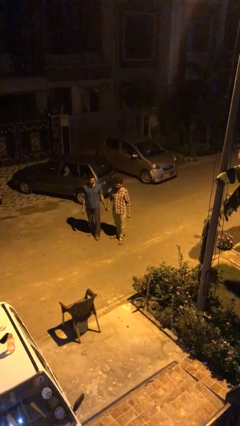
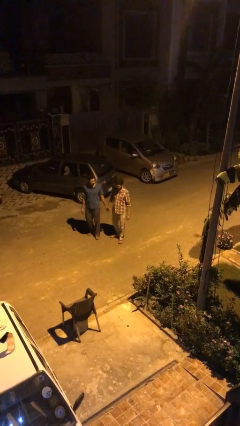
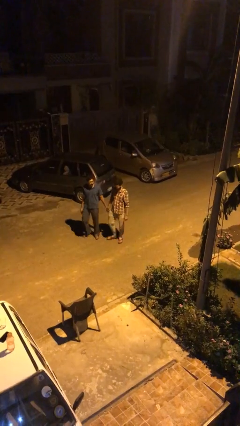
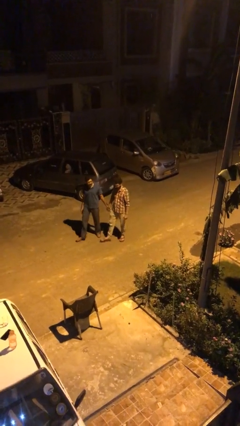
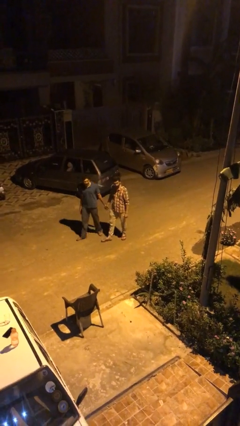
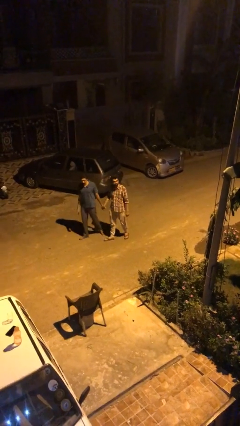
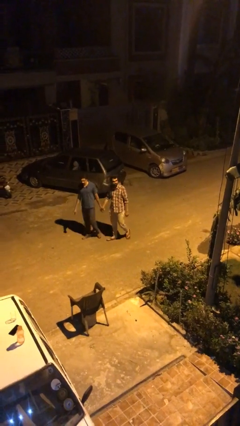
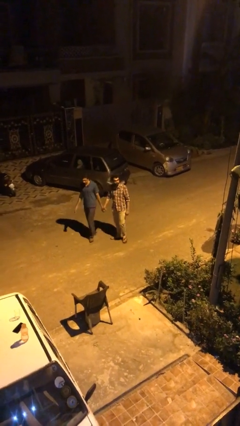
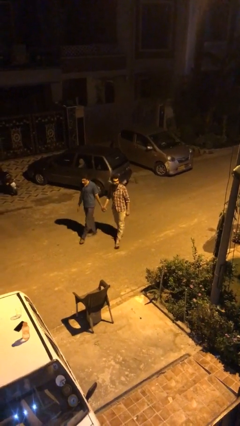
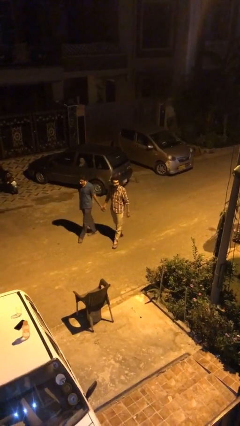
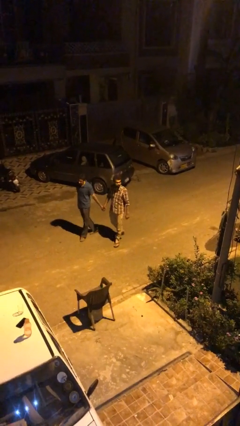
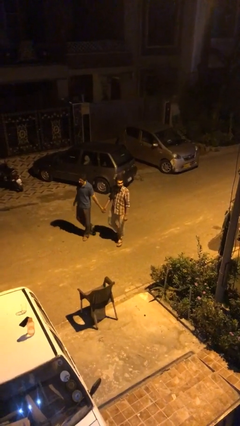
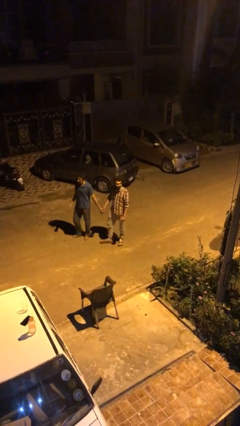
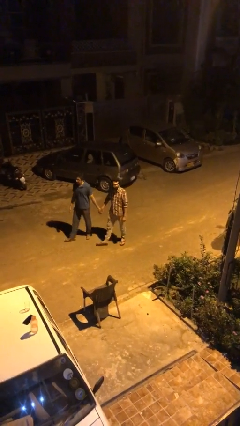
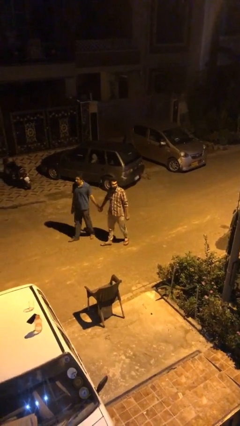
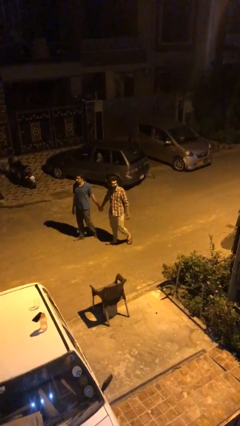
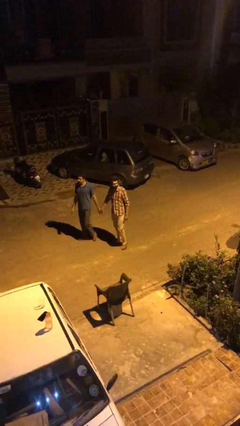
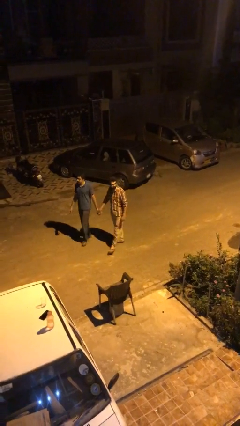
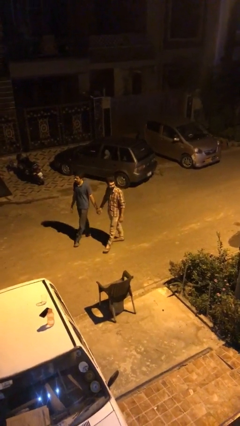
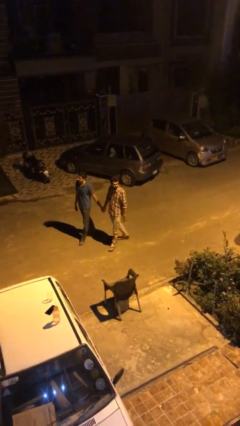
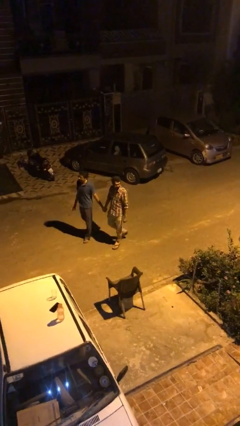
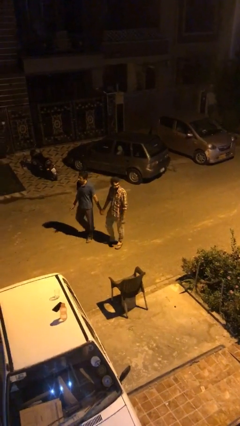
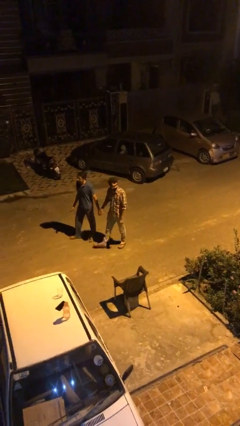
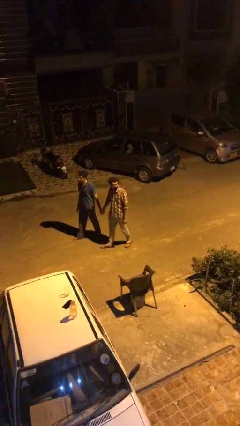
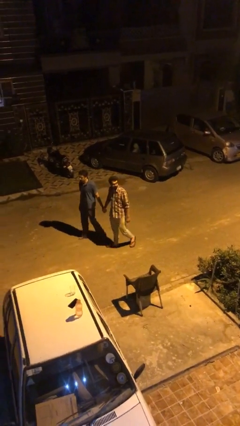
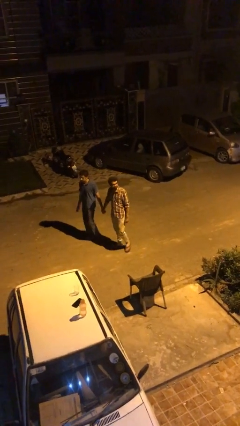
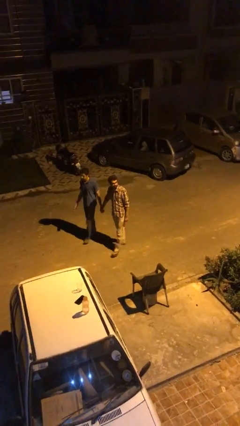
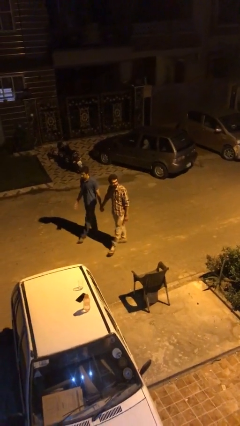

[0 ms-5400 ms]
person holds hand

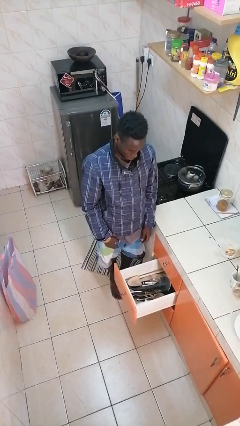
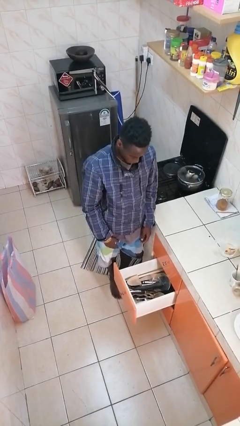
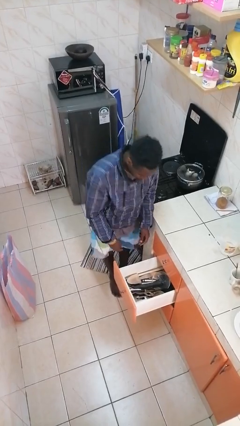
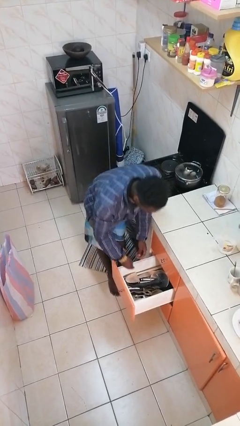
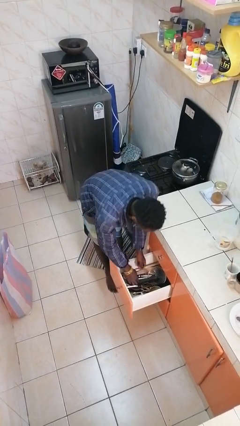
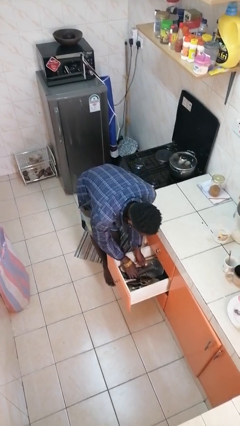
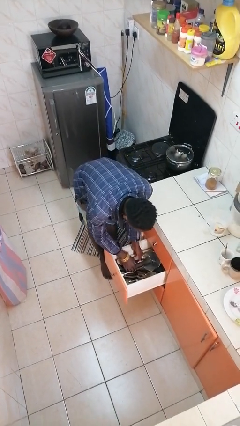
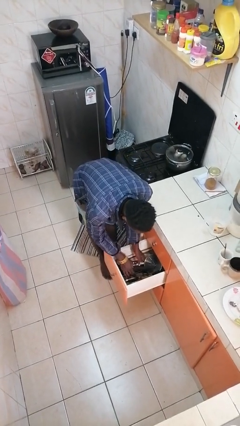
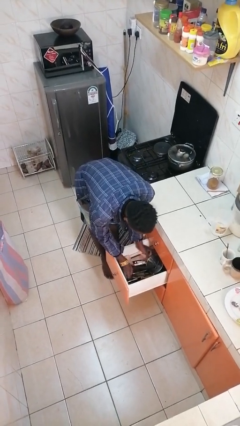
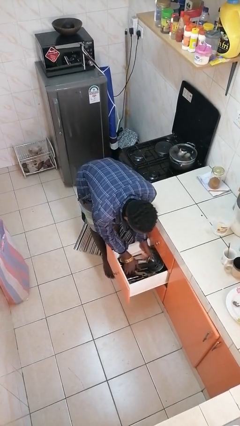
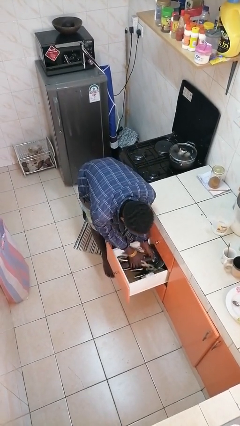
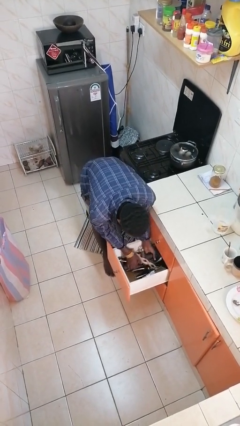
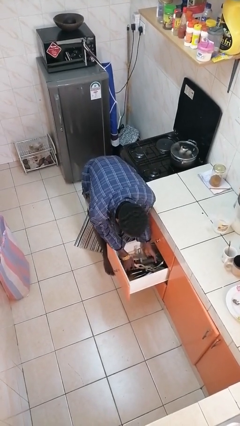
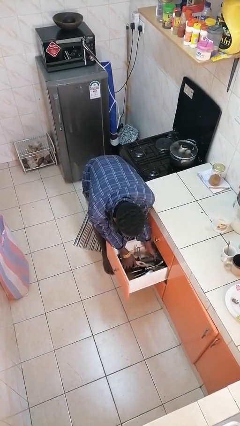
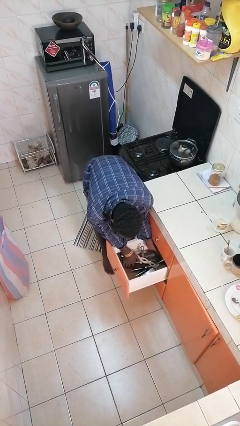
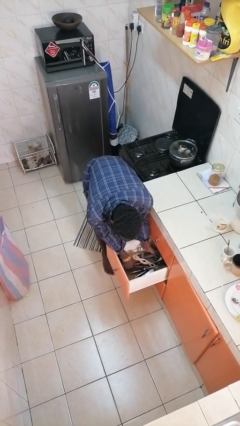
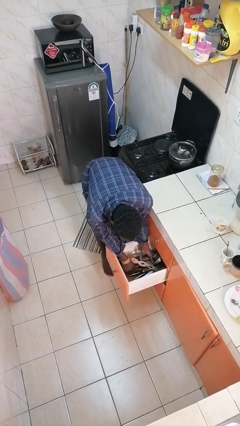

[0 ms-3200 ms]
person searches in kitchen drawer

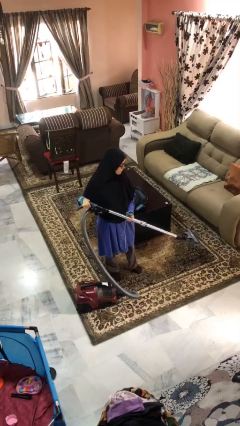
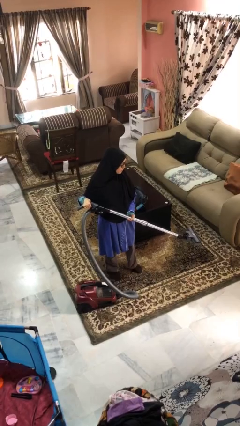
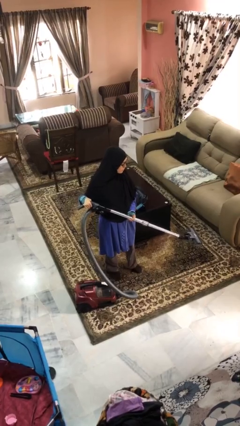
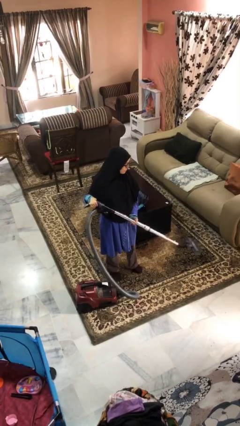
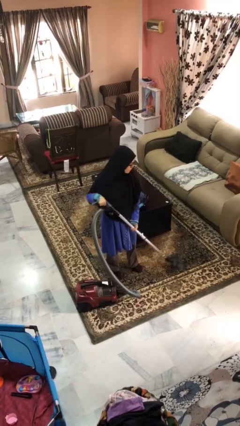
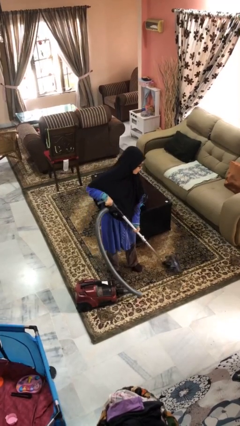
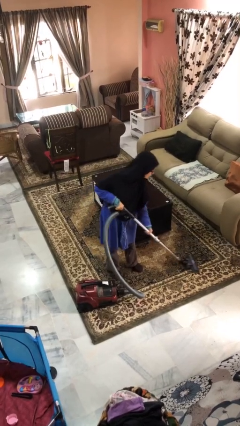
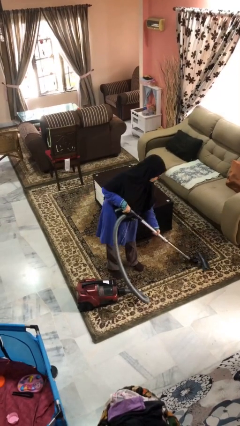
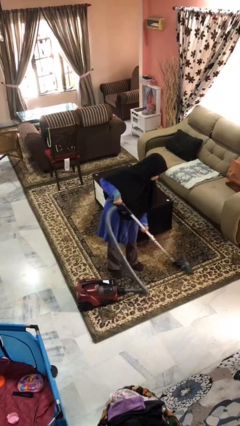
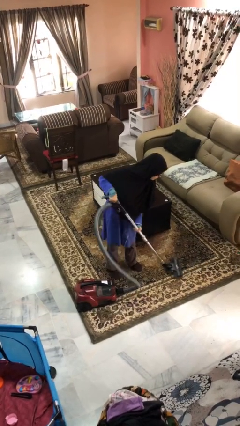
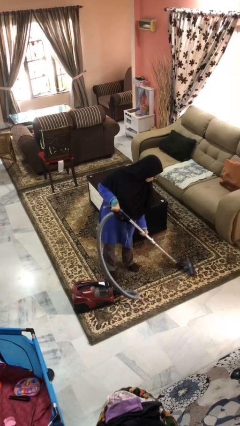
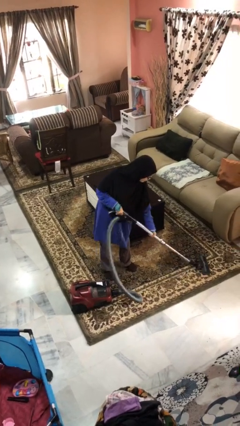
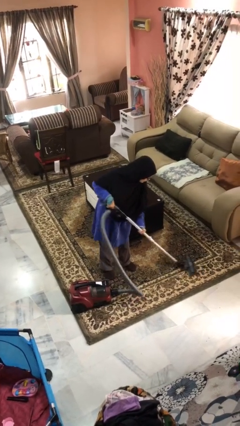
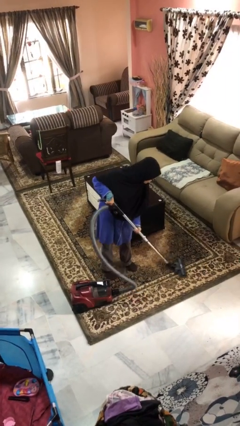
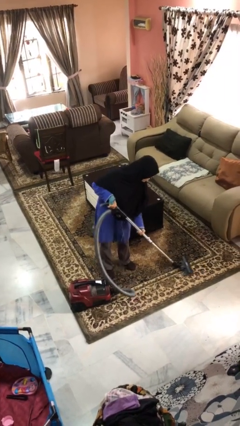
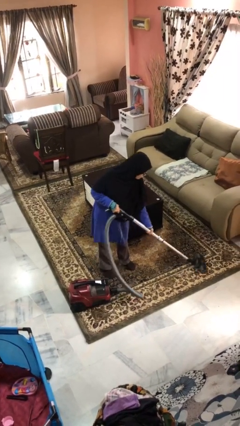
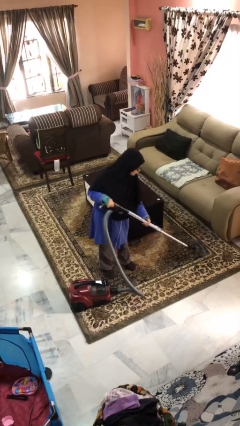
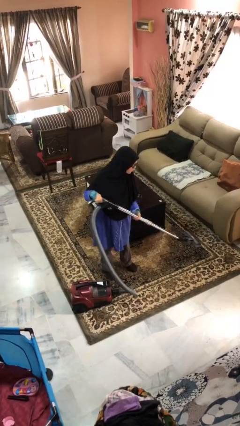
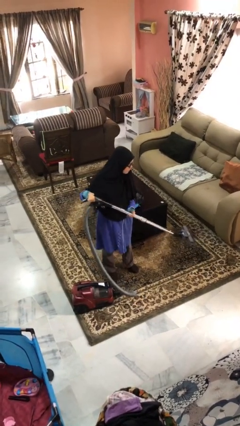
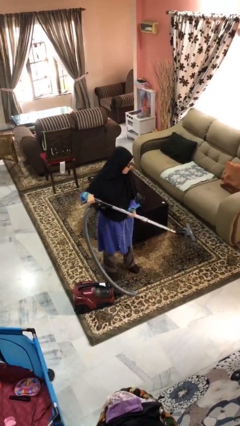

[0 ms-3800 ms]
person vacuums carpet

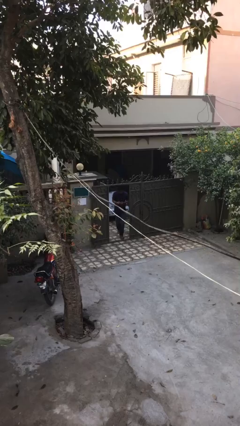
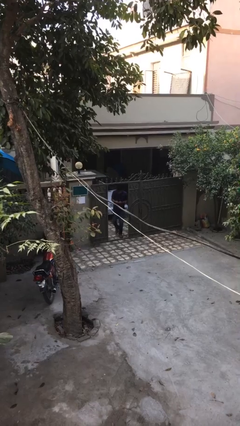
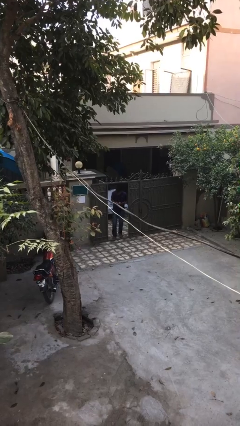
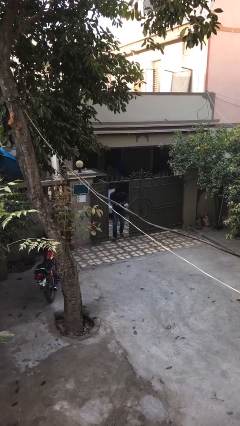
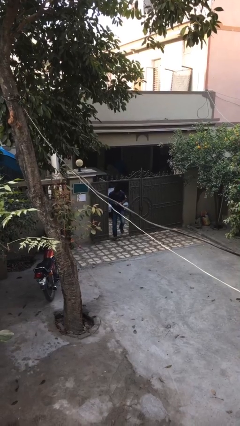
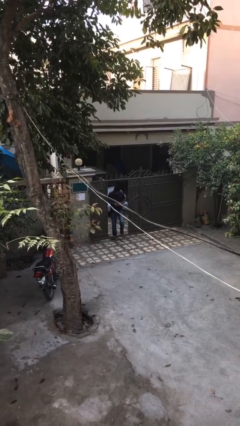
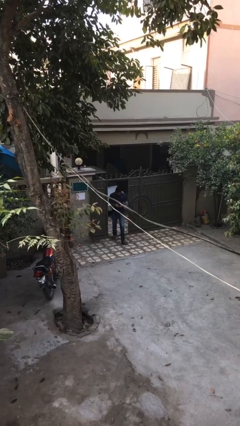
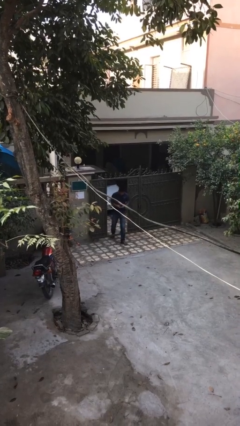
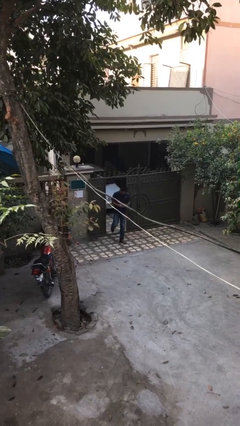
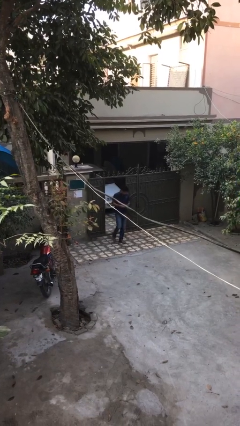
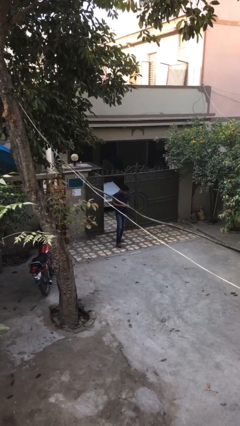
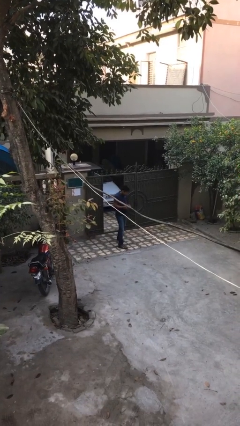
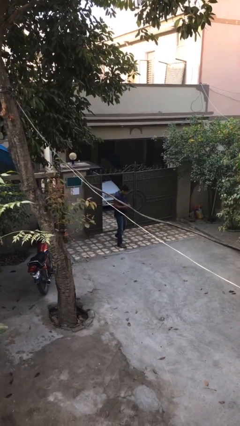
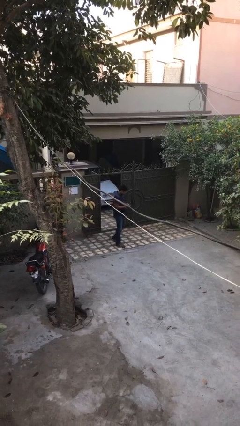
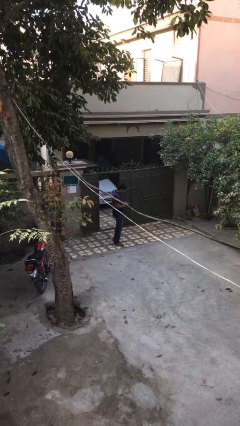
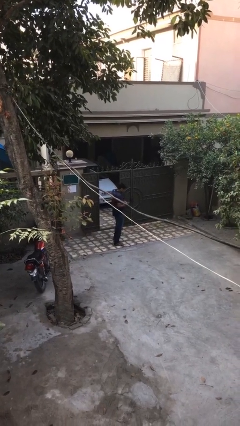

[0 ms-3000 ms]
person enters scene through structure

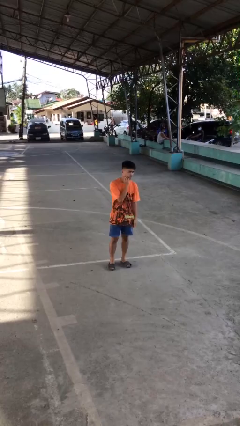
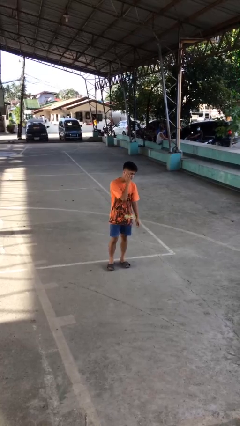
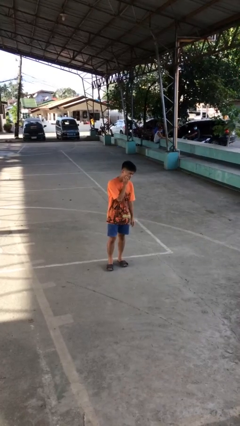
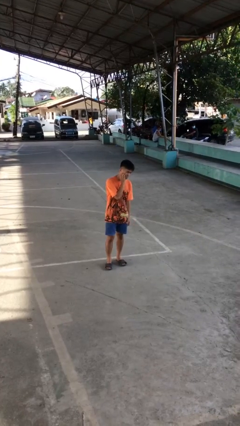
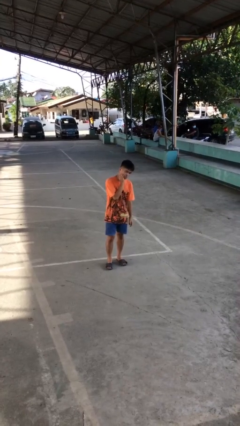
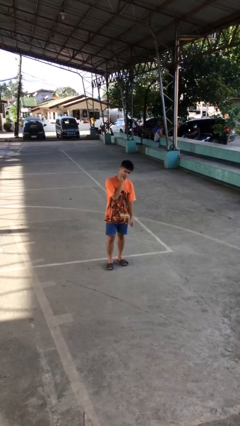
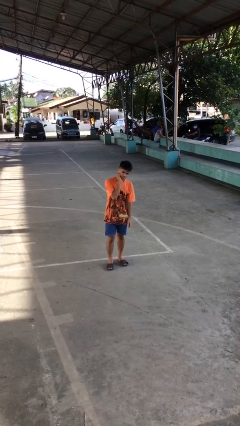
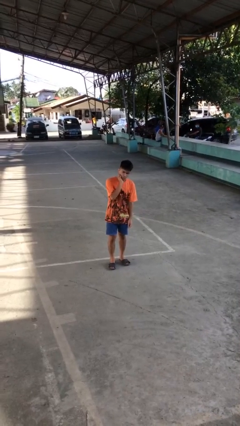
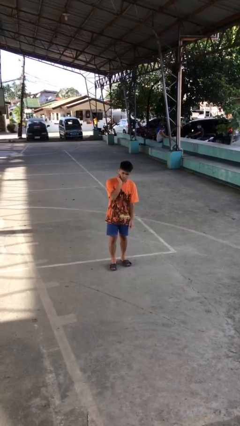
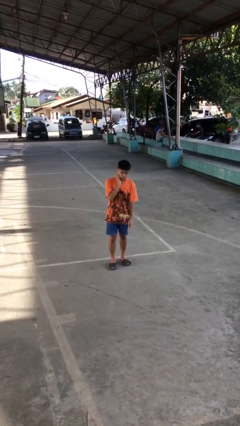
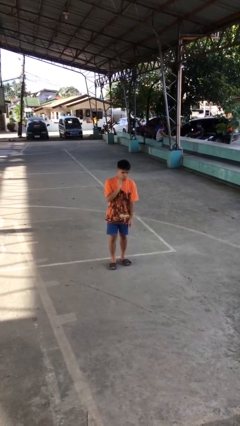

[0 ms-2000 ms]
person scratches face

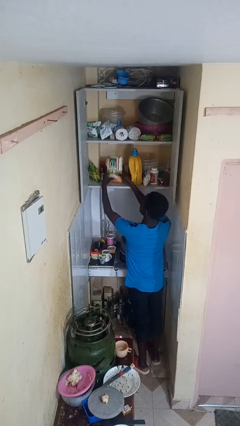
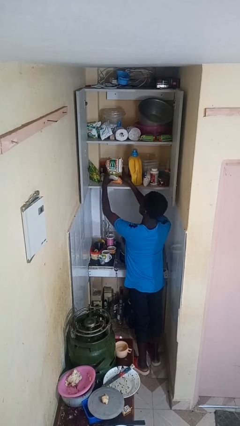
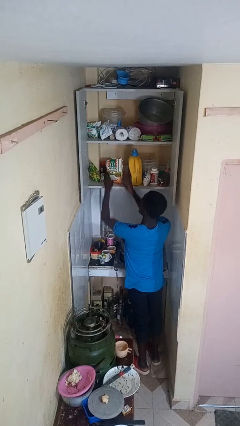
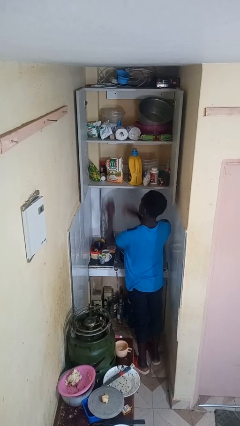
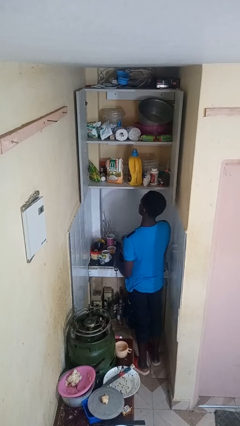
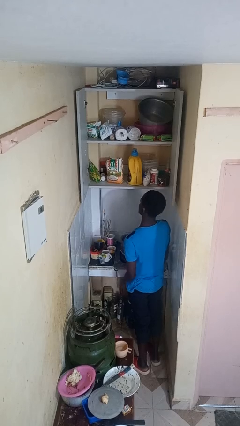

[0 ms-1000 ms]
person puts object in cabinet
